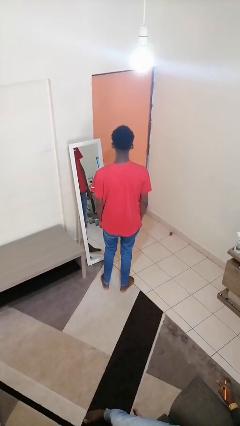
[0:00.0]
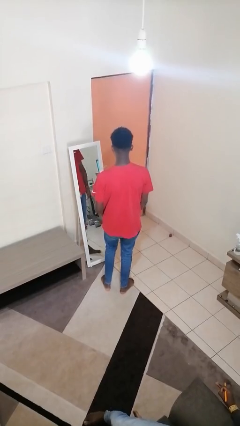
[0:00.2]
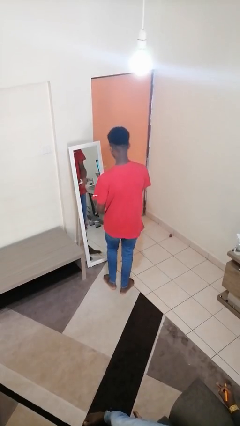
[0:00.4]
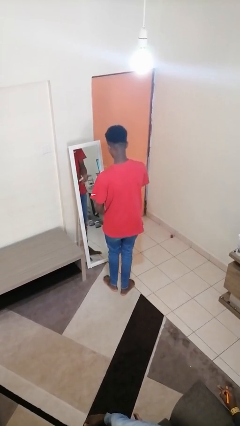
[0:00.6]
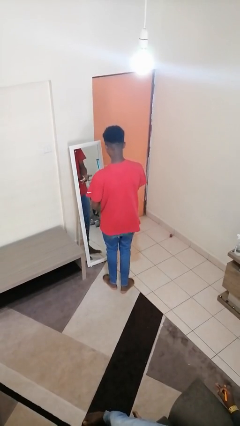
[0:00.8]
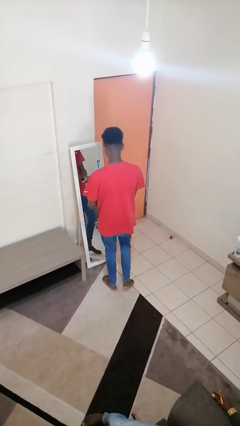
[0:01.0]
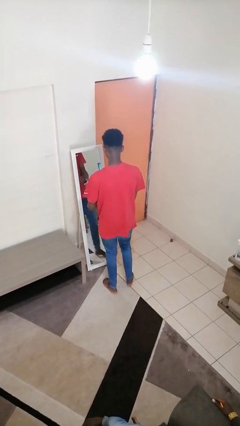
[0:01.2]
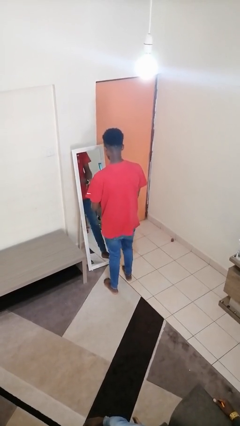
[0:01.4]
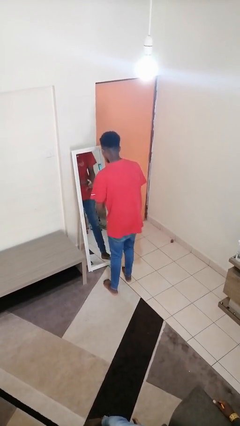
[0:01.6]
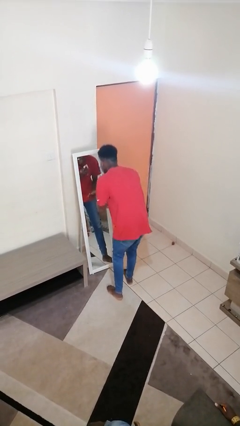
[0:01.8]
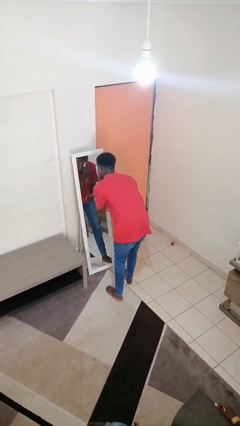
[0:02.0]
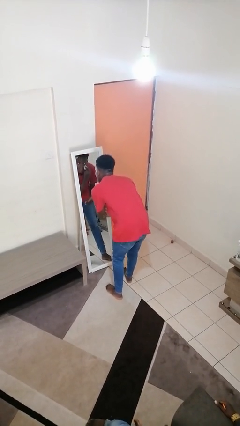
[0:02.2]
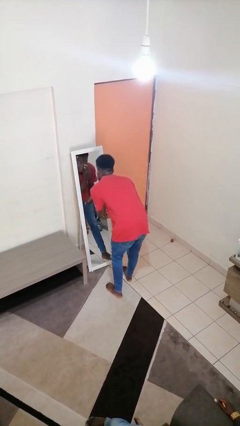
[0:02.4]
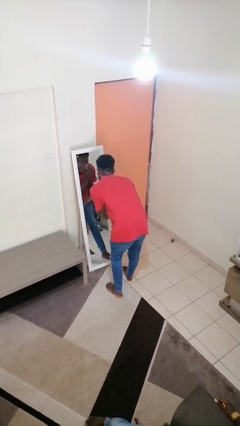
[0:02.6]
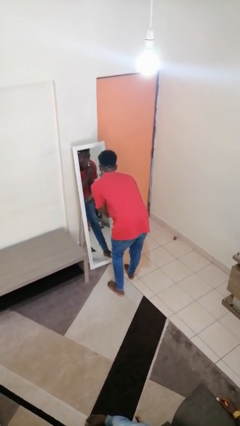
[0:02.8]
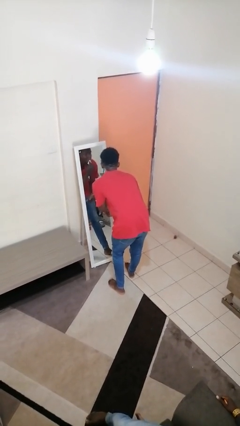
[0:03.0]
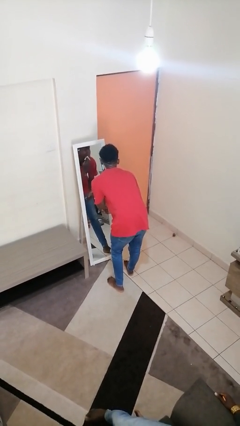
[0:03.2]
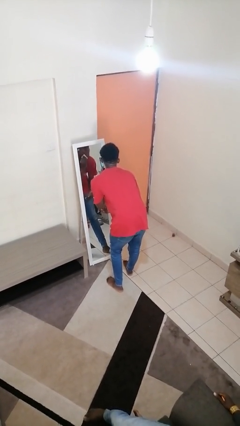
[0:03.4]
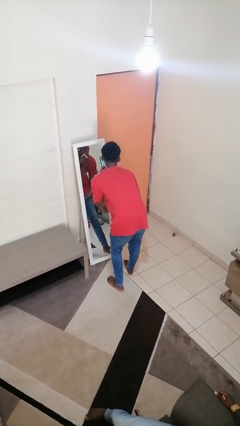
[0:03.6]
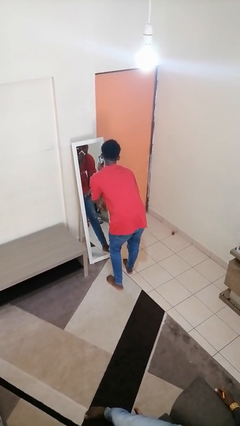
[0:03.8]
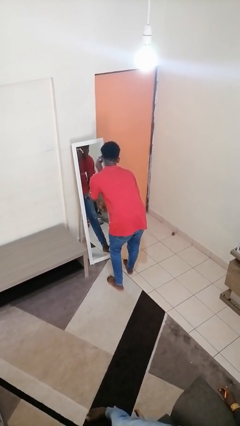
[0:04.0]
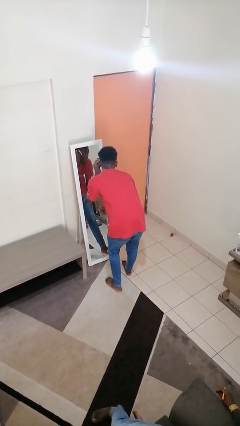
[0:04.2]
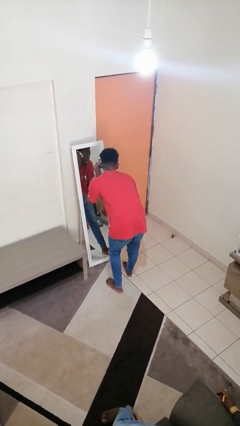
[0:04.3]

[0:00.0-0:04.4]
person applies foundation makeup

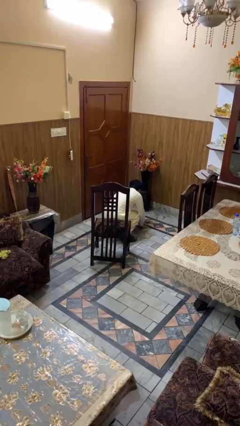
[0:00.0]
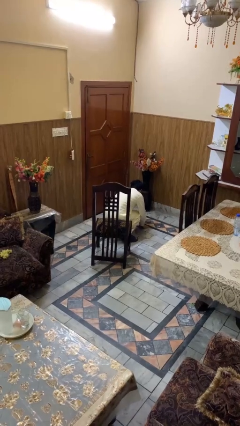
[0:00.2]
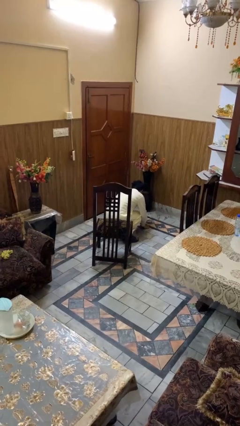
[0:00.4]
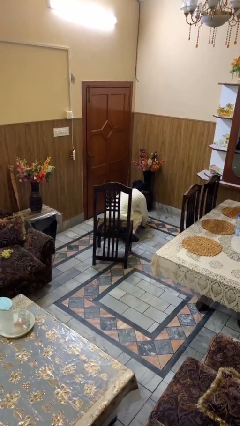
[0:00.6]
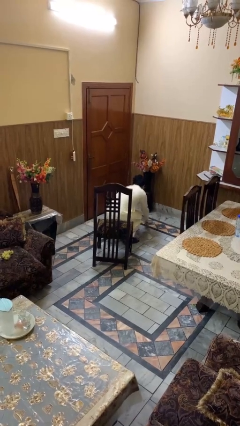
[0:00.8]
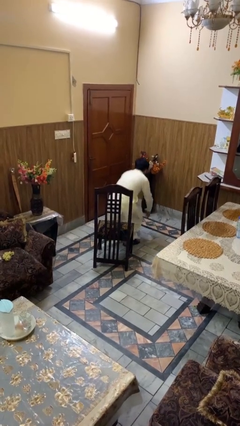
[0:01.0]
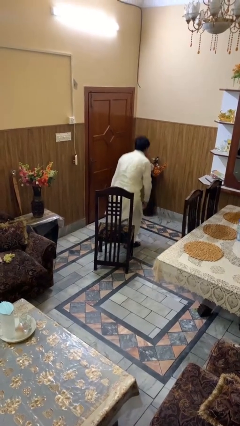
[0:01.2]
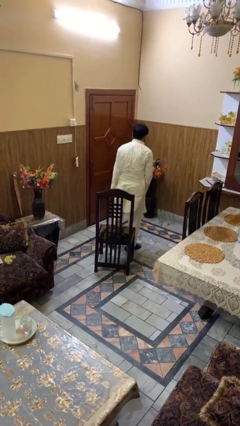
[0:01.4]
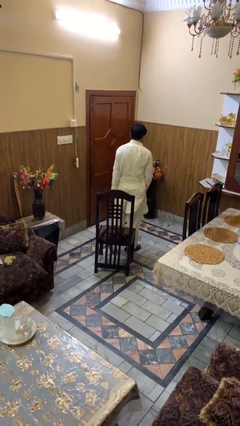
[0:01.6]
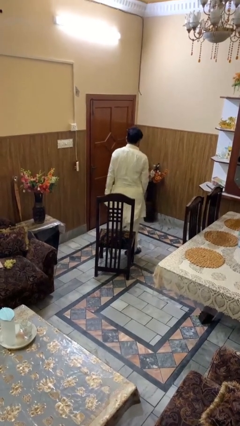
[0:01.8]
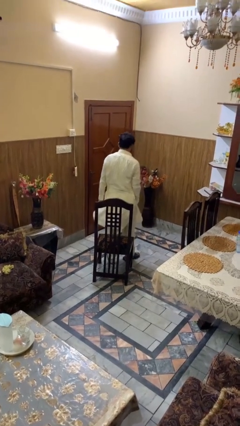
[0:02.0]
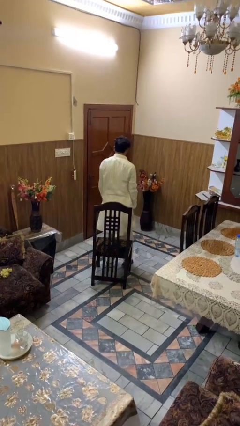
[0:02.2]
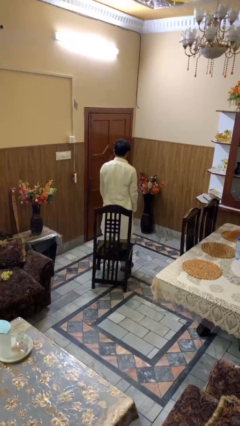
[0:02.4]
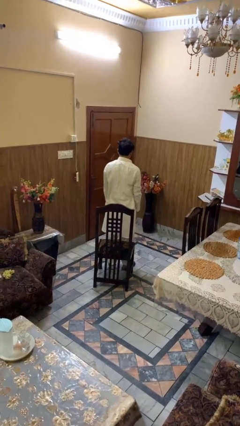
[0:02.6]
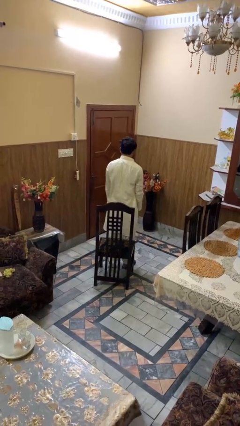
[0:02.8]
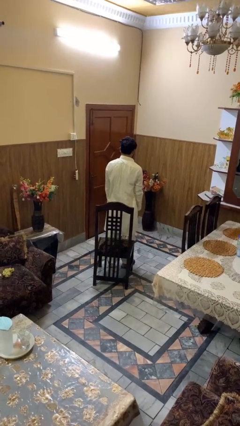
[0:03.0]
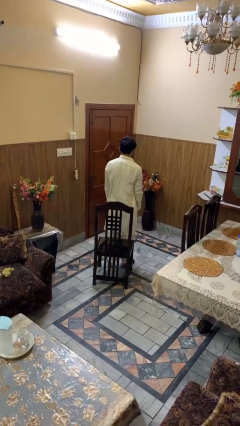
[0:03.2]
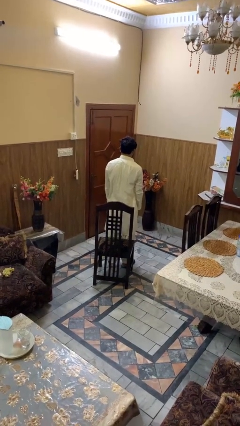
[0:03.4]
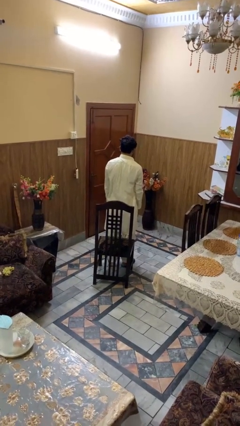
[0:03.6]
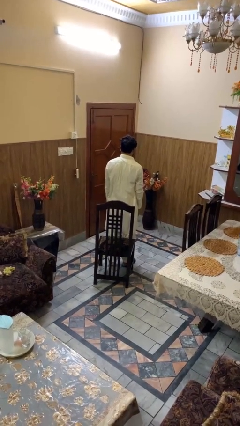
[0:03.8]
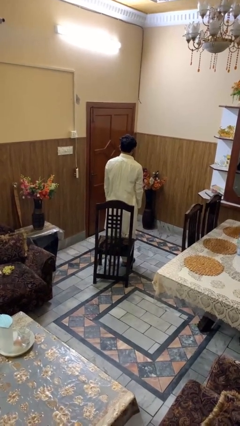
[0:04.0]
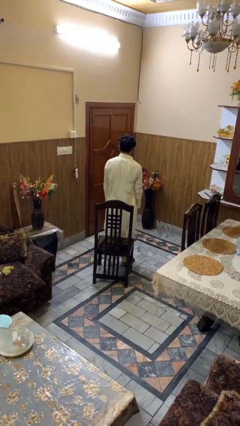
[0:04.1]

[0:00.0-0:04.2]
person stands up from floor

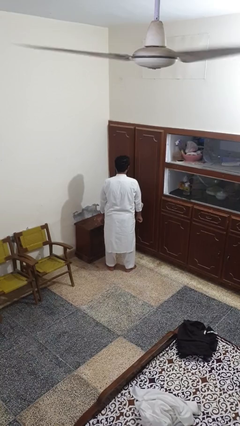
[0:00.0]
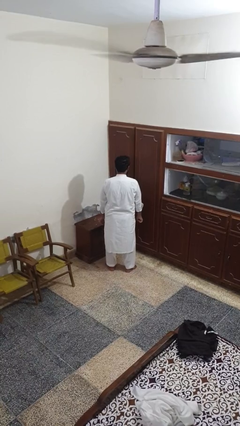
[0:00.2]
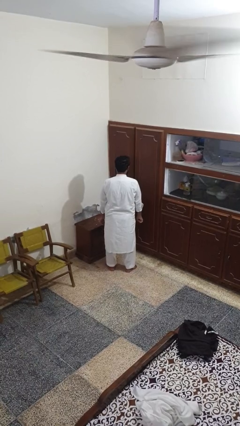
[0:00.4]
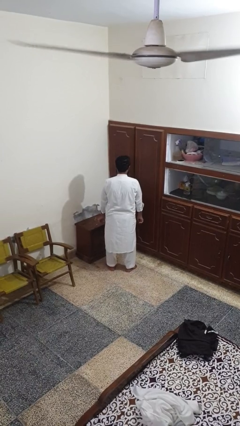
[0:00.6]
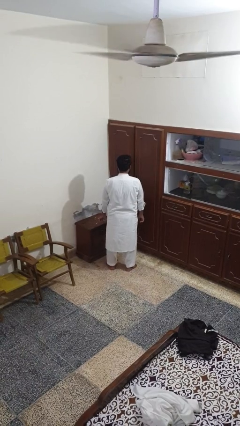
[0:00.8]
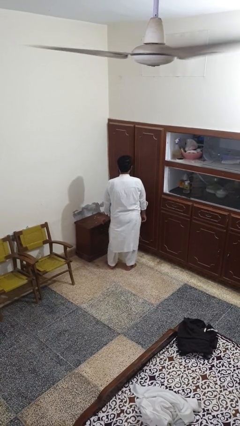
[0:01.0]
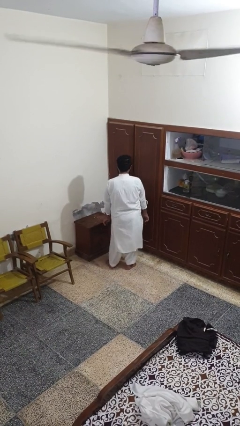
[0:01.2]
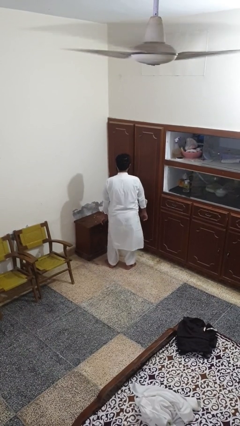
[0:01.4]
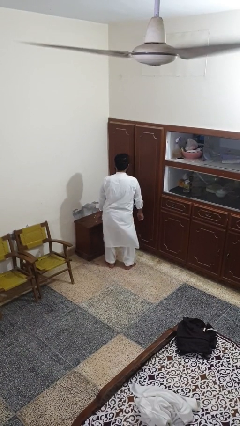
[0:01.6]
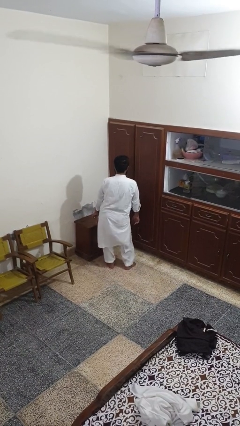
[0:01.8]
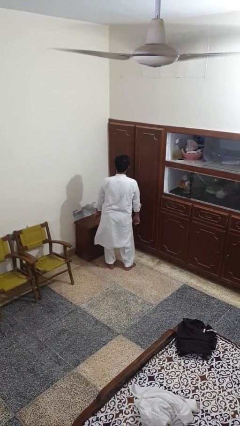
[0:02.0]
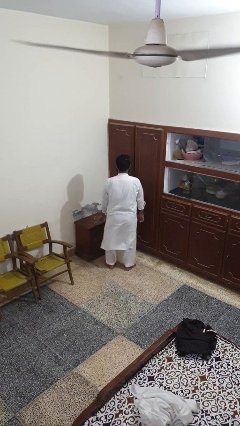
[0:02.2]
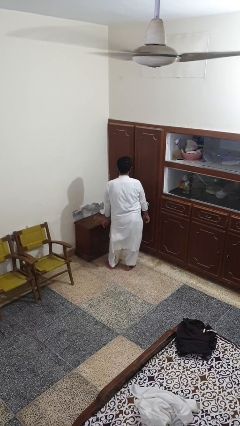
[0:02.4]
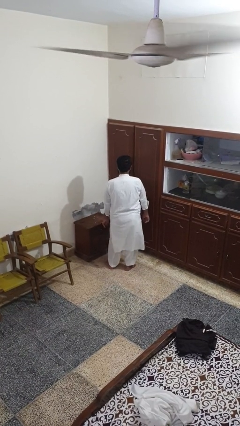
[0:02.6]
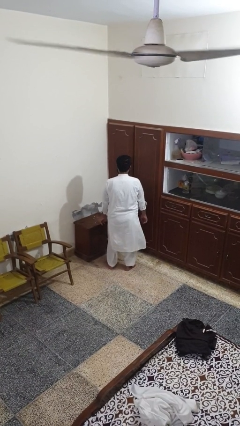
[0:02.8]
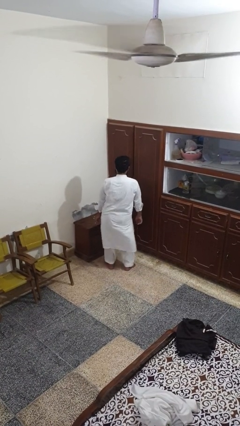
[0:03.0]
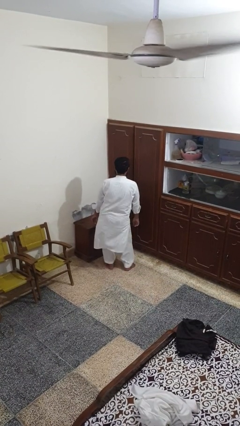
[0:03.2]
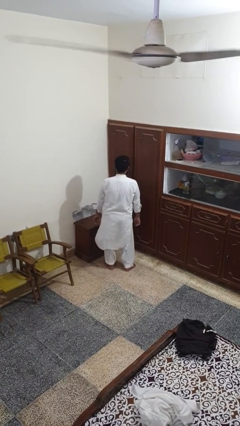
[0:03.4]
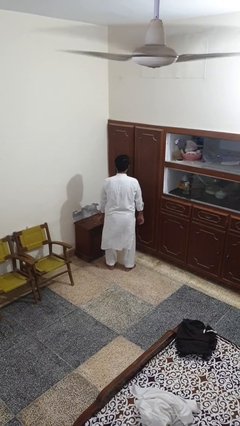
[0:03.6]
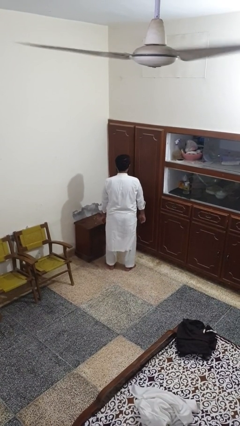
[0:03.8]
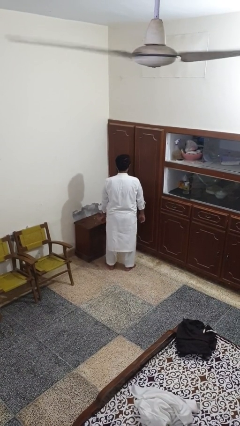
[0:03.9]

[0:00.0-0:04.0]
person wiggles hips

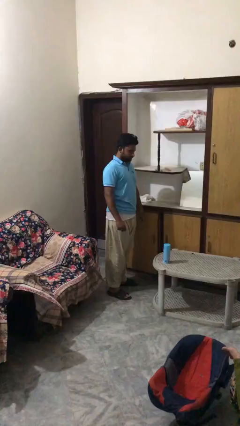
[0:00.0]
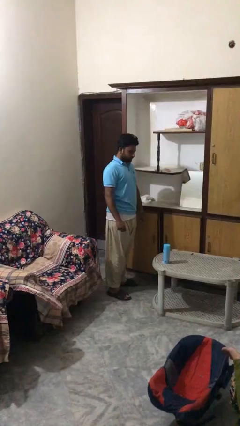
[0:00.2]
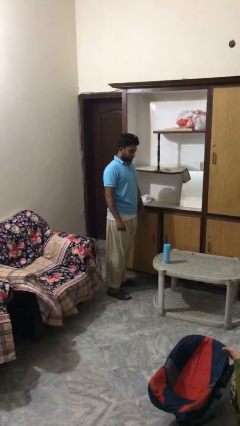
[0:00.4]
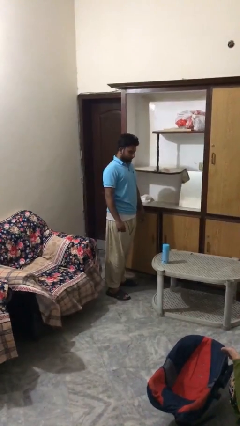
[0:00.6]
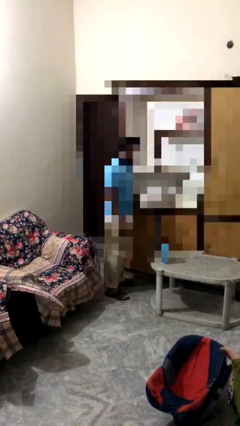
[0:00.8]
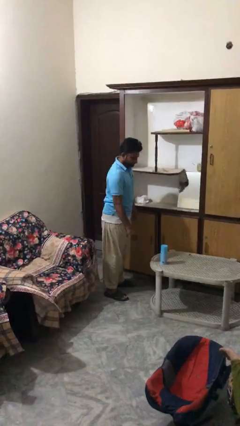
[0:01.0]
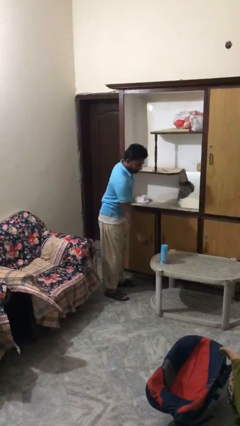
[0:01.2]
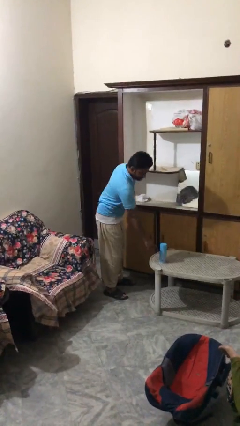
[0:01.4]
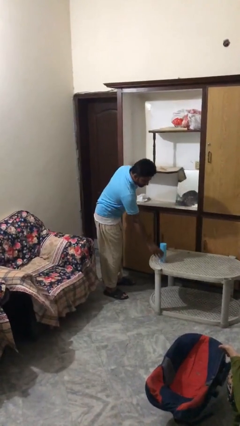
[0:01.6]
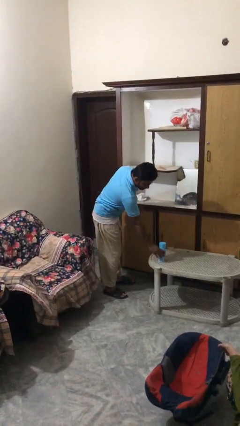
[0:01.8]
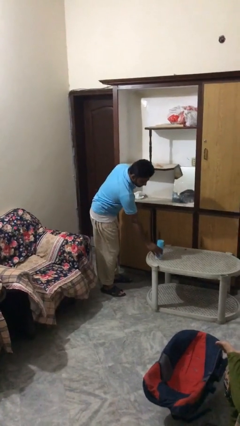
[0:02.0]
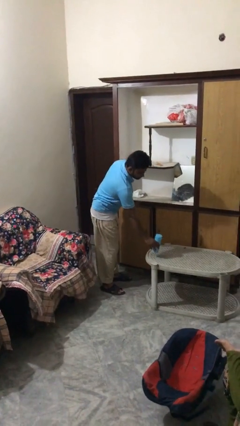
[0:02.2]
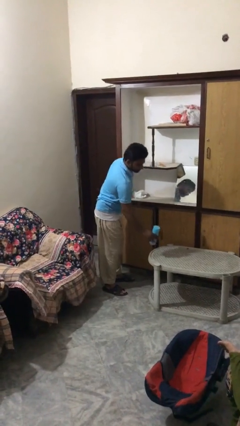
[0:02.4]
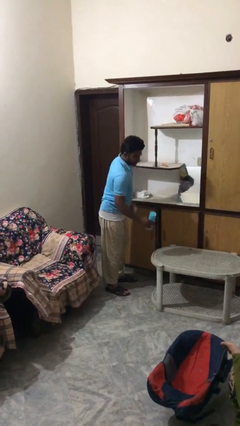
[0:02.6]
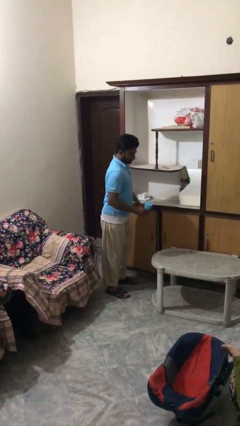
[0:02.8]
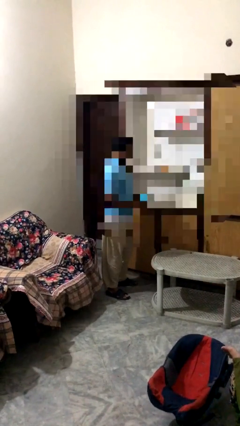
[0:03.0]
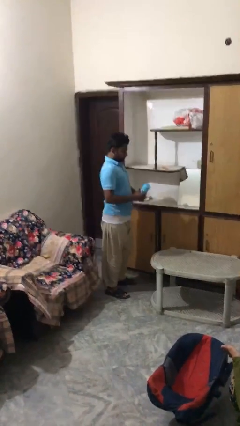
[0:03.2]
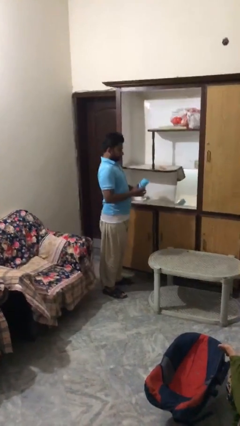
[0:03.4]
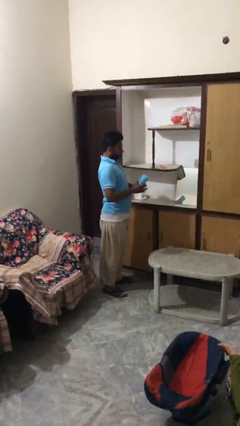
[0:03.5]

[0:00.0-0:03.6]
person picks up object from table

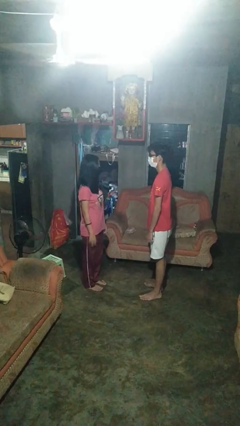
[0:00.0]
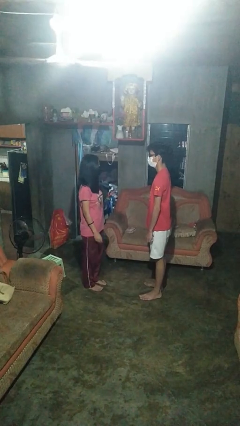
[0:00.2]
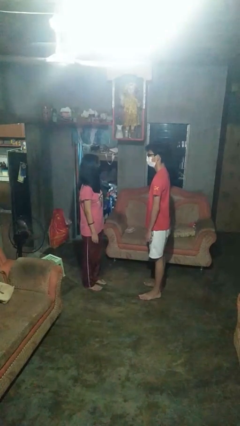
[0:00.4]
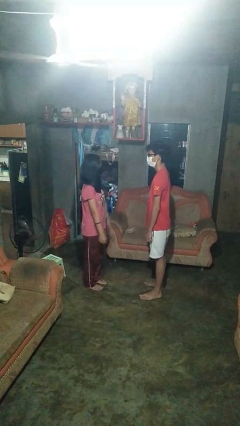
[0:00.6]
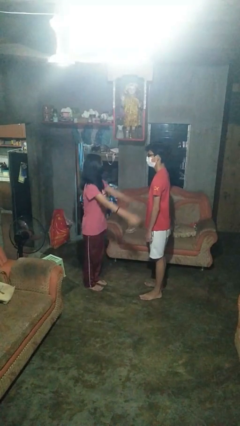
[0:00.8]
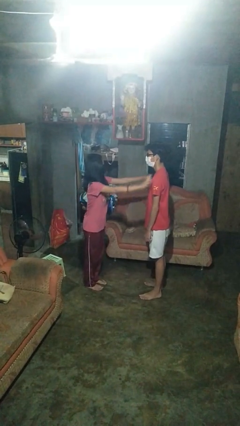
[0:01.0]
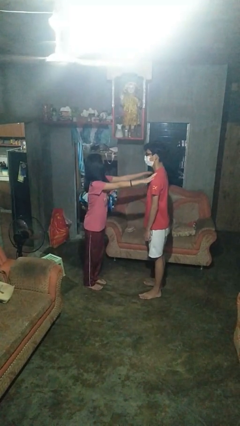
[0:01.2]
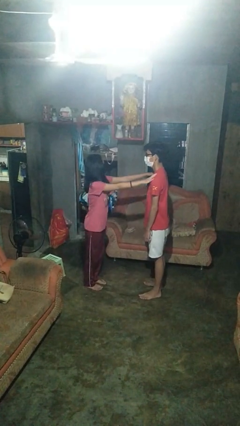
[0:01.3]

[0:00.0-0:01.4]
person pounds shoulders of person
